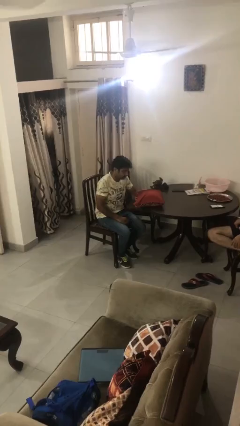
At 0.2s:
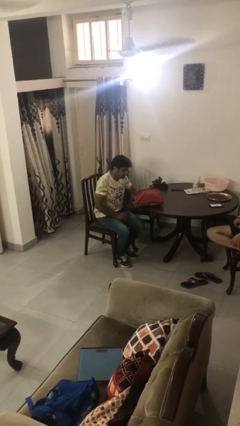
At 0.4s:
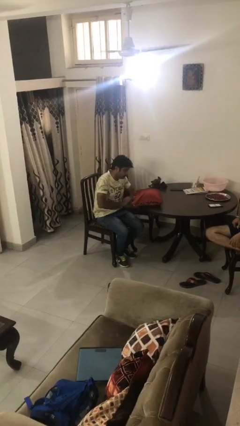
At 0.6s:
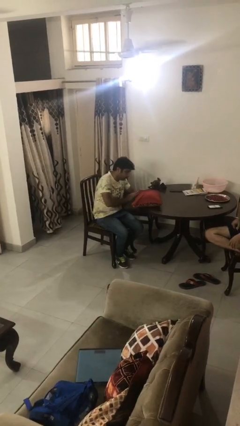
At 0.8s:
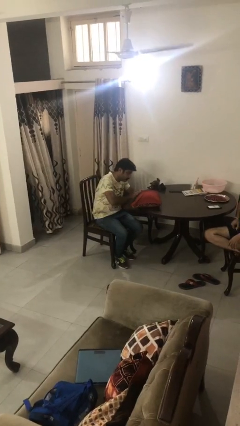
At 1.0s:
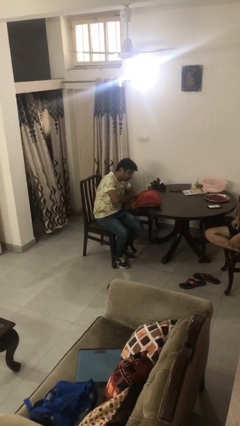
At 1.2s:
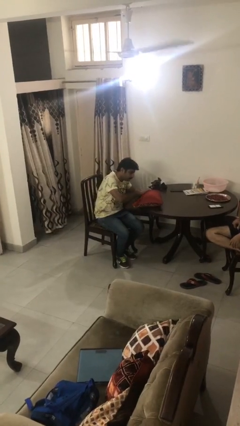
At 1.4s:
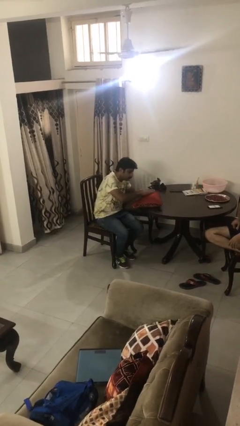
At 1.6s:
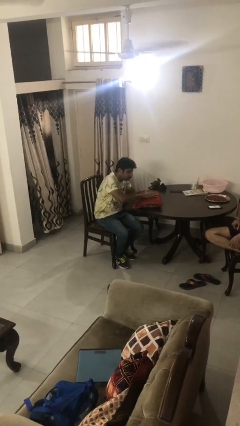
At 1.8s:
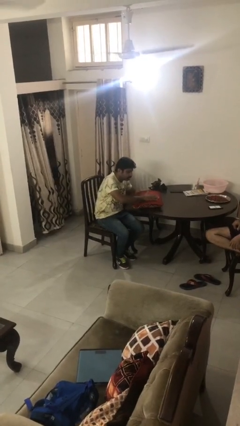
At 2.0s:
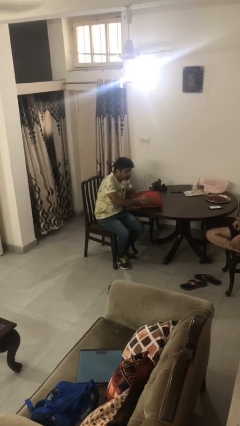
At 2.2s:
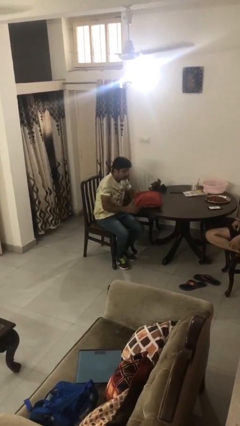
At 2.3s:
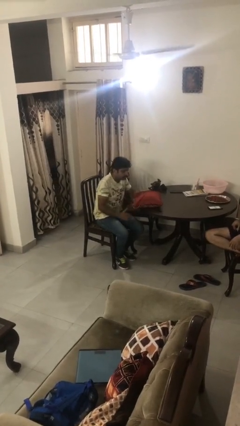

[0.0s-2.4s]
person waves hand over object

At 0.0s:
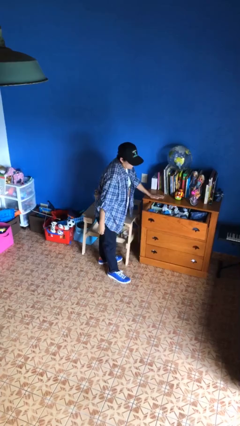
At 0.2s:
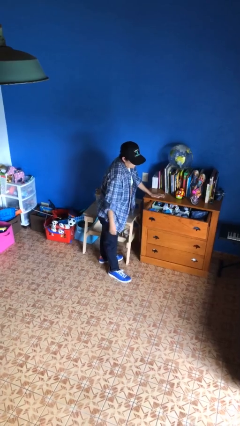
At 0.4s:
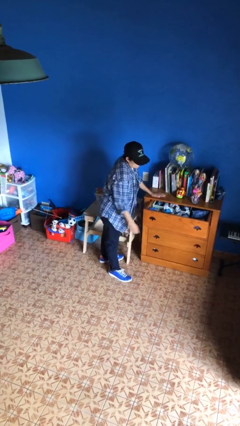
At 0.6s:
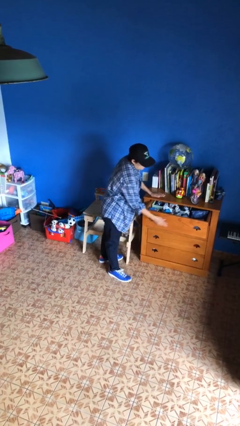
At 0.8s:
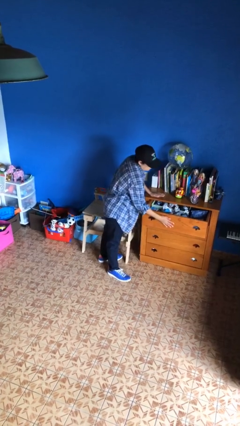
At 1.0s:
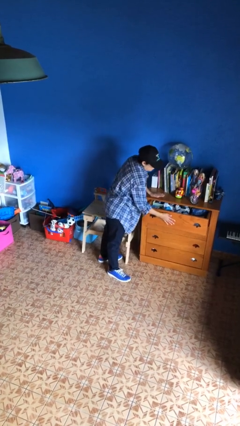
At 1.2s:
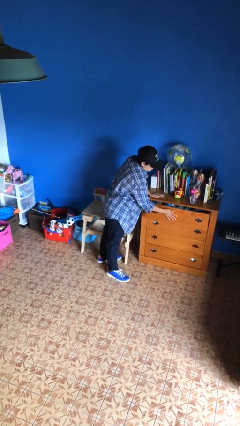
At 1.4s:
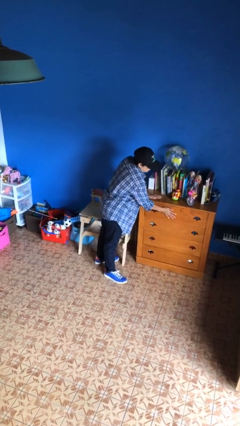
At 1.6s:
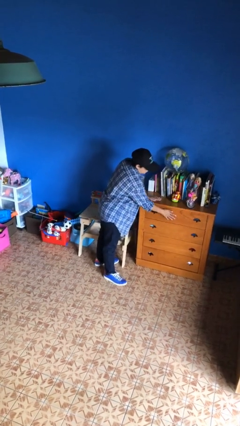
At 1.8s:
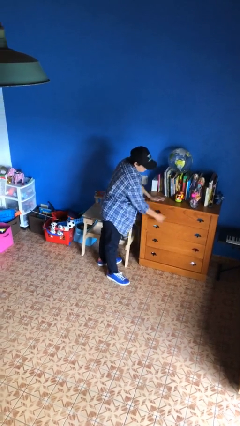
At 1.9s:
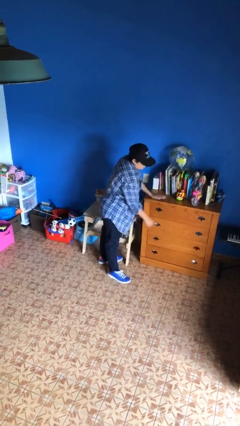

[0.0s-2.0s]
person closes dresser drawer

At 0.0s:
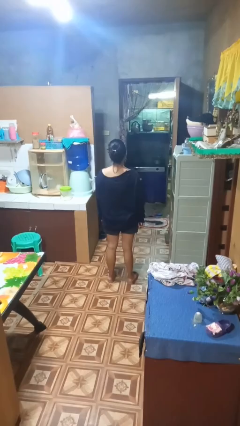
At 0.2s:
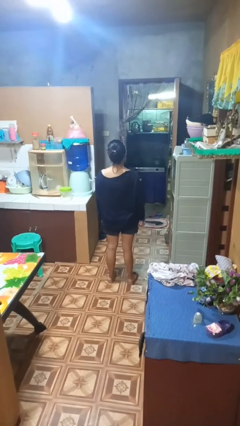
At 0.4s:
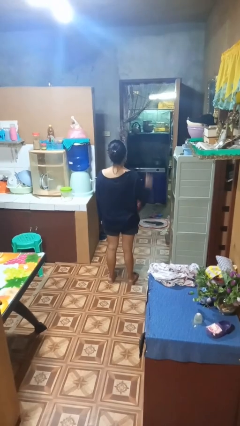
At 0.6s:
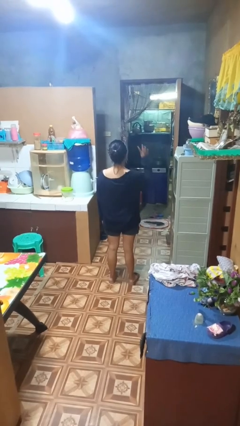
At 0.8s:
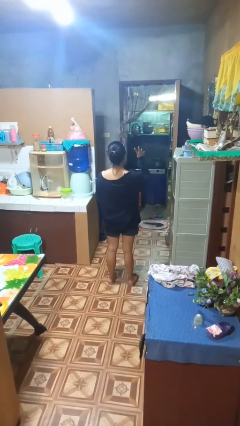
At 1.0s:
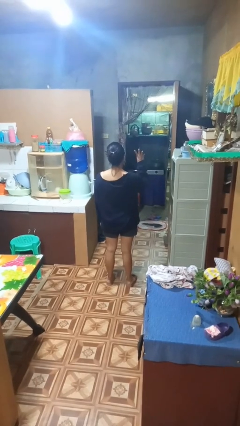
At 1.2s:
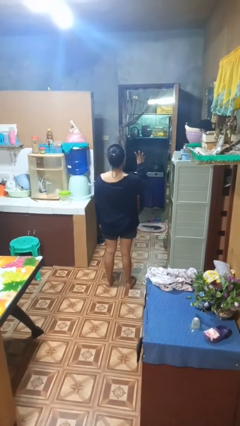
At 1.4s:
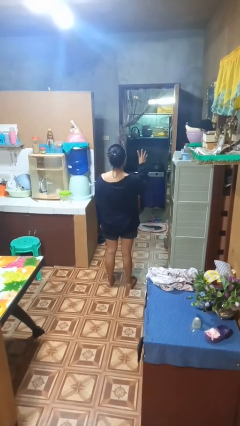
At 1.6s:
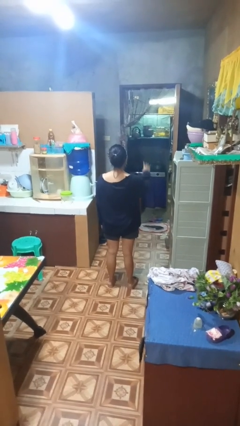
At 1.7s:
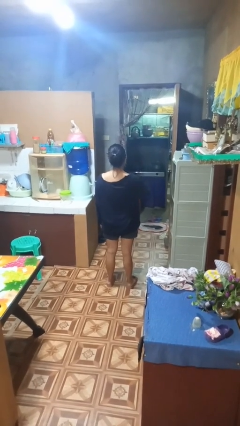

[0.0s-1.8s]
person gestures number four

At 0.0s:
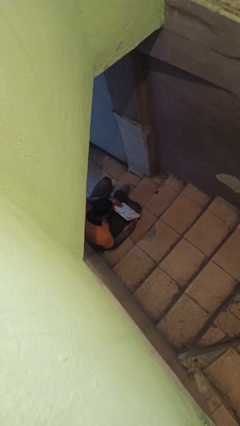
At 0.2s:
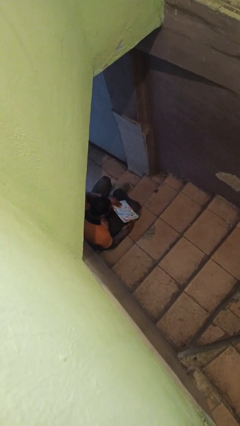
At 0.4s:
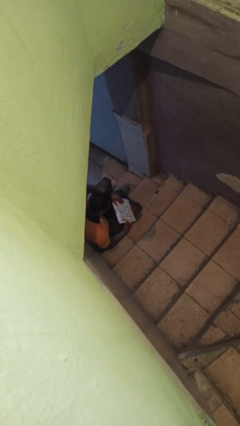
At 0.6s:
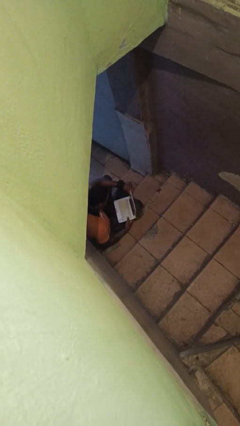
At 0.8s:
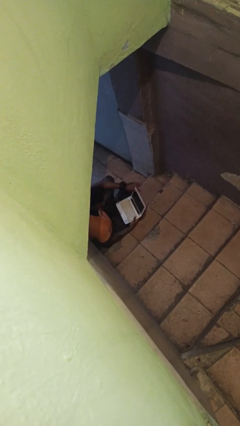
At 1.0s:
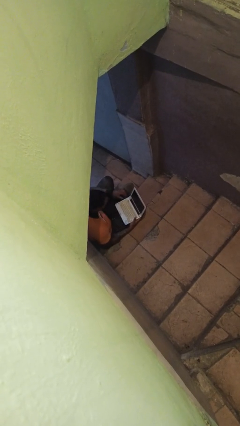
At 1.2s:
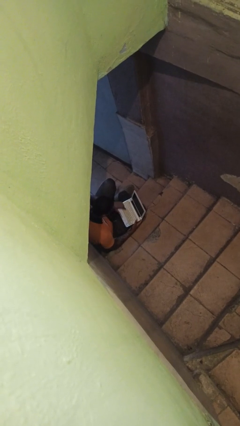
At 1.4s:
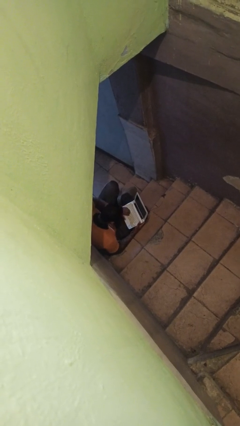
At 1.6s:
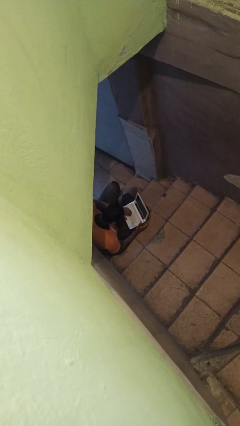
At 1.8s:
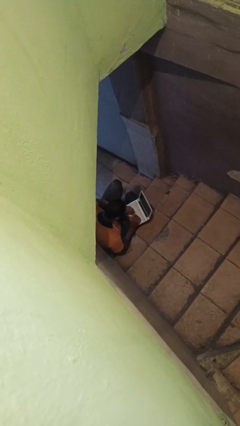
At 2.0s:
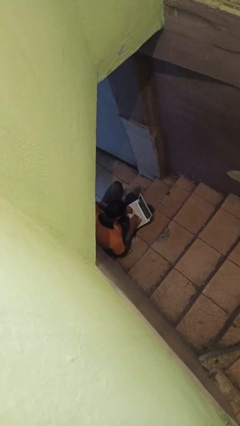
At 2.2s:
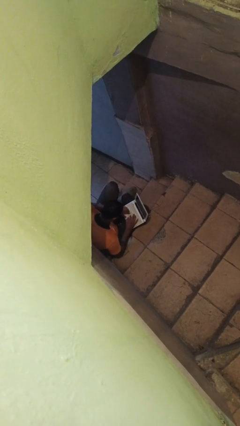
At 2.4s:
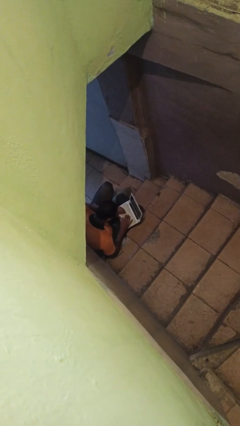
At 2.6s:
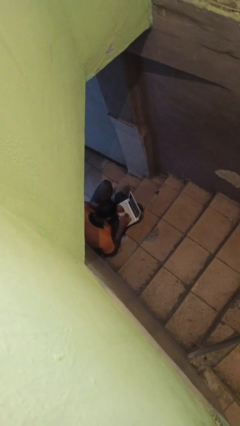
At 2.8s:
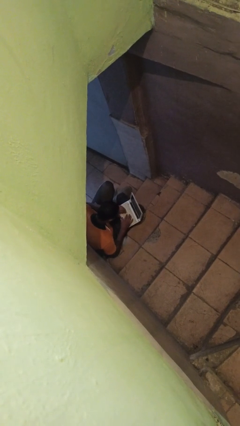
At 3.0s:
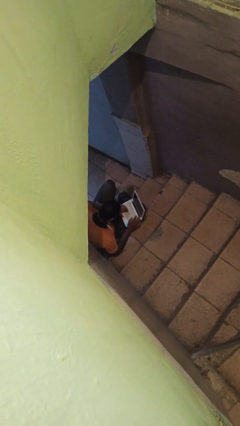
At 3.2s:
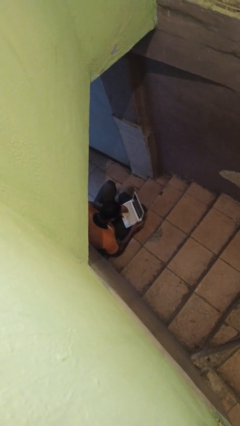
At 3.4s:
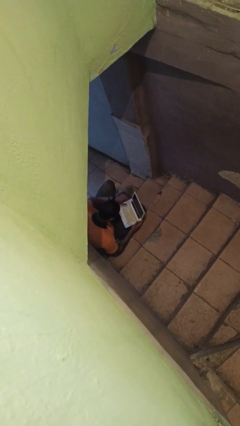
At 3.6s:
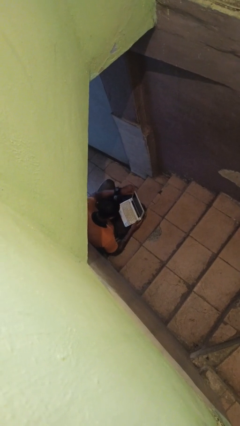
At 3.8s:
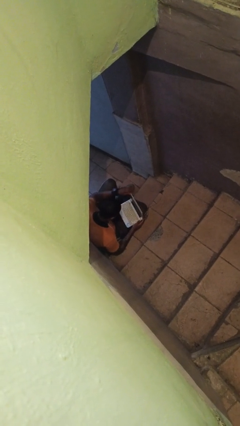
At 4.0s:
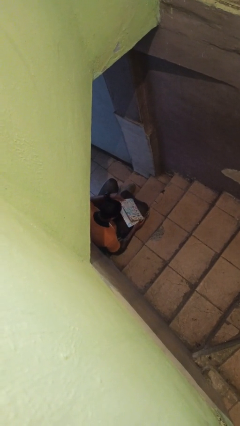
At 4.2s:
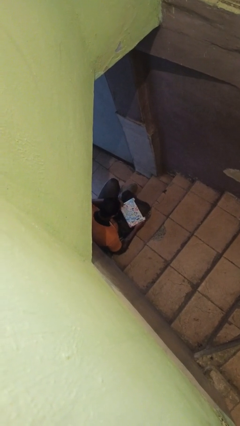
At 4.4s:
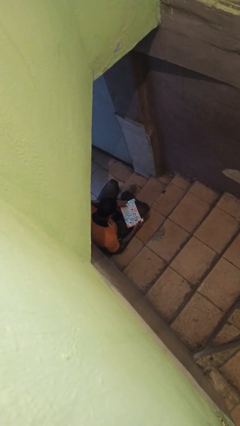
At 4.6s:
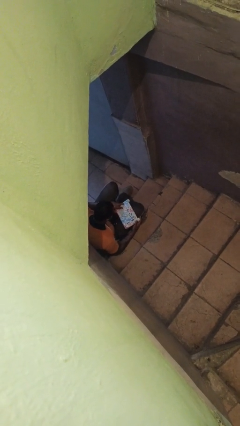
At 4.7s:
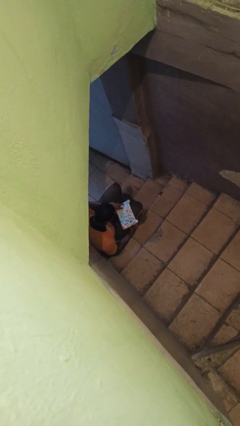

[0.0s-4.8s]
person interacts with laptop

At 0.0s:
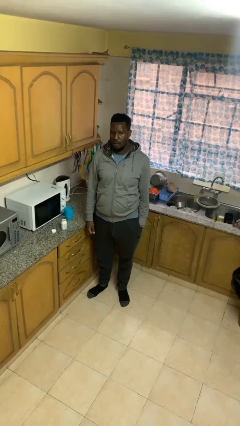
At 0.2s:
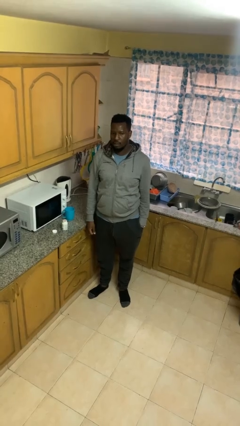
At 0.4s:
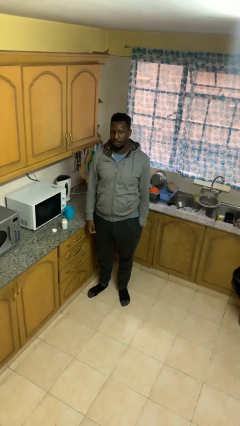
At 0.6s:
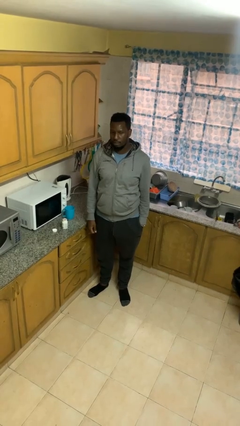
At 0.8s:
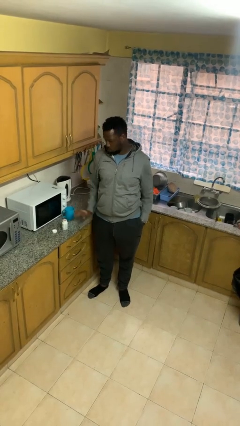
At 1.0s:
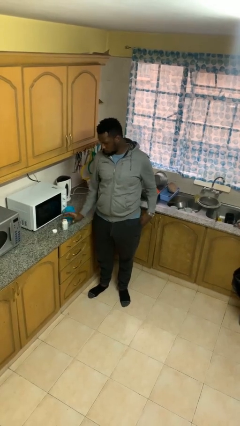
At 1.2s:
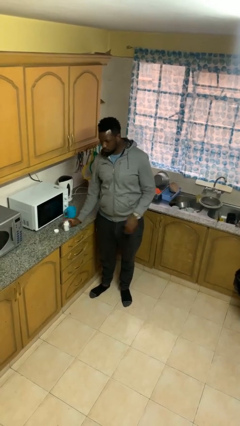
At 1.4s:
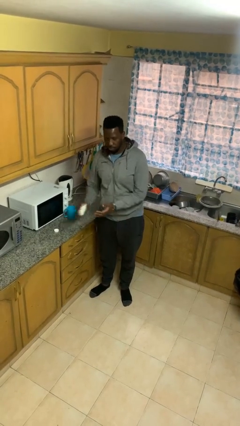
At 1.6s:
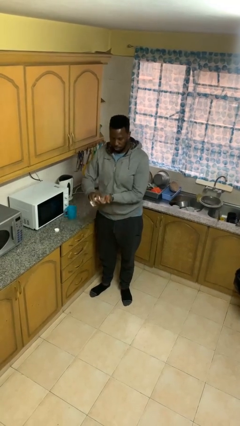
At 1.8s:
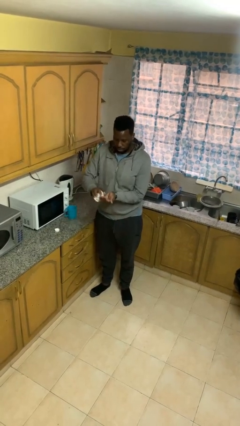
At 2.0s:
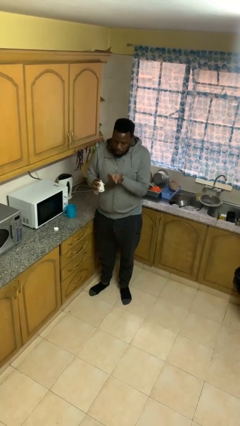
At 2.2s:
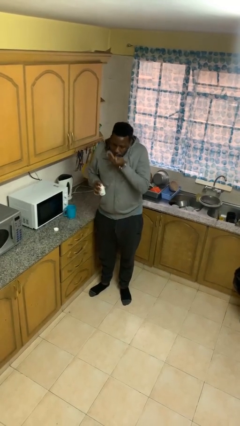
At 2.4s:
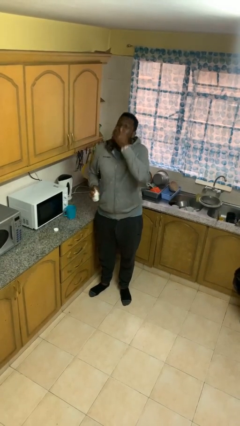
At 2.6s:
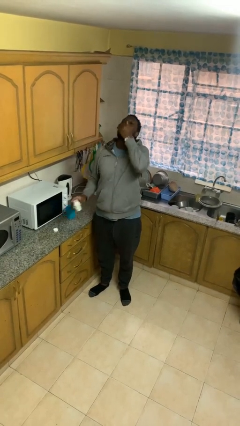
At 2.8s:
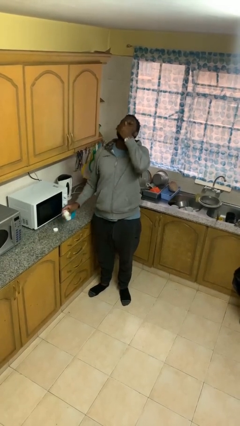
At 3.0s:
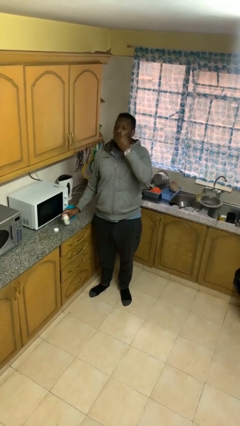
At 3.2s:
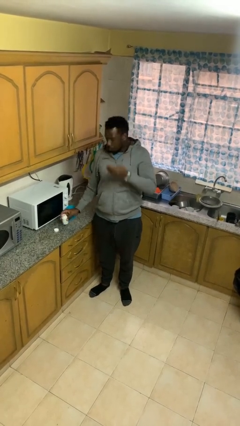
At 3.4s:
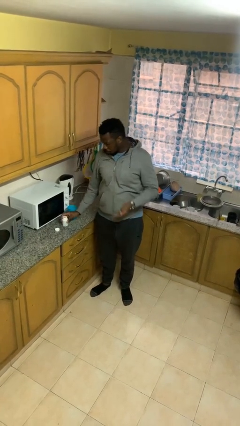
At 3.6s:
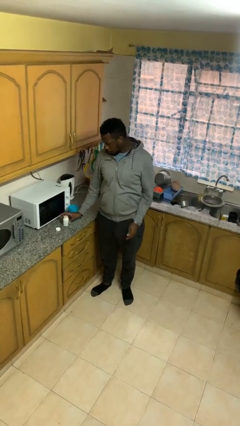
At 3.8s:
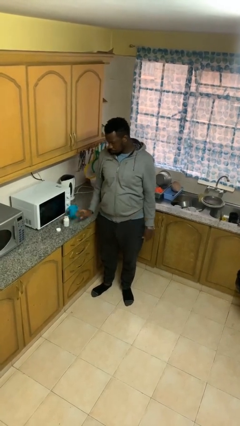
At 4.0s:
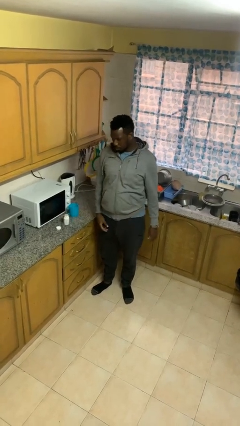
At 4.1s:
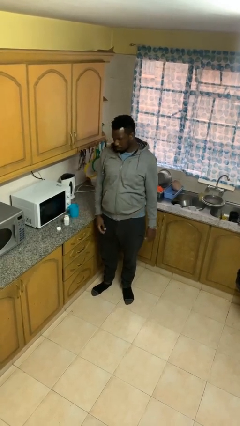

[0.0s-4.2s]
person takes medicine pills

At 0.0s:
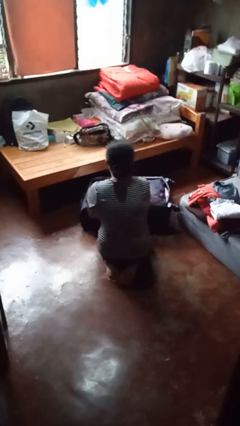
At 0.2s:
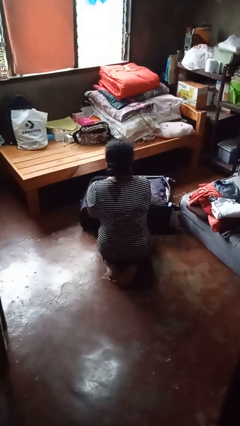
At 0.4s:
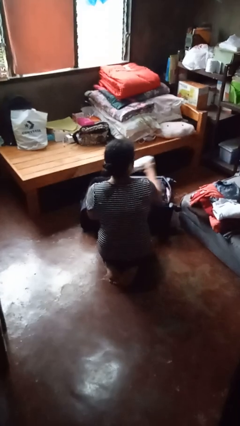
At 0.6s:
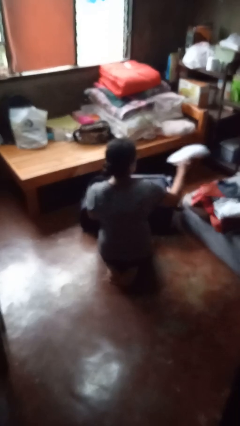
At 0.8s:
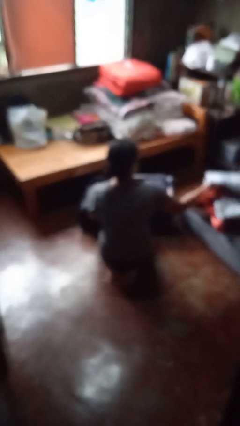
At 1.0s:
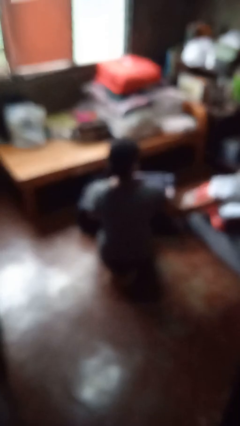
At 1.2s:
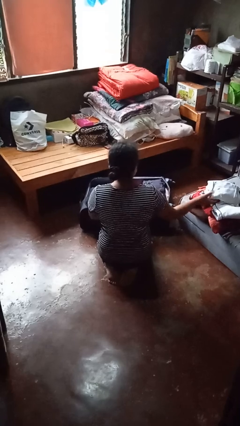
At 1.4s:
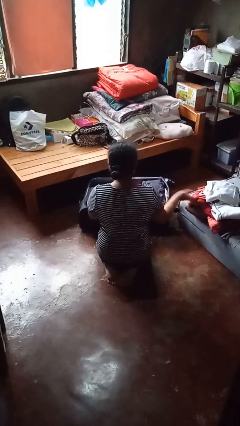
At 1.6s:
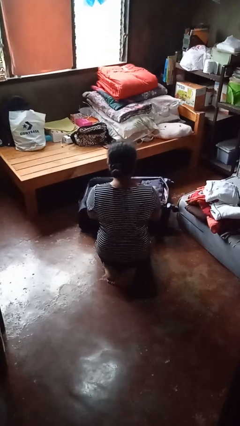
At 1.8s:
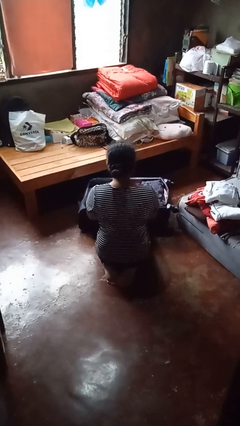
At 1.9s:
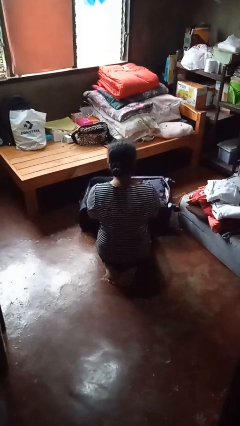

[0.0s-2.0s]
person unloads clothes from suitcase

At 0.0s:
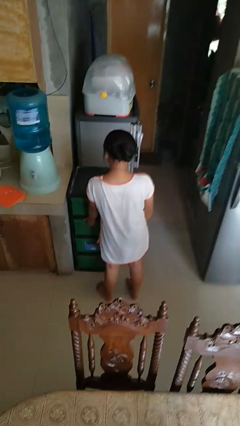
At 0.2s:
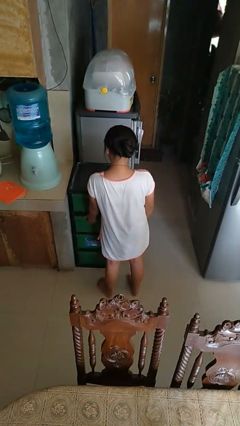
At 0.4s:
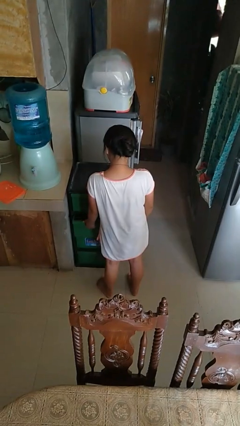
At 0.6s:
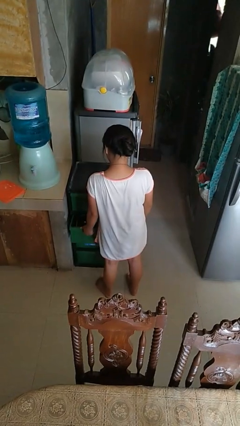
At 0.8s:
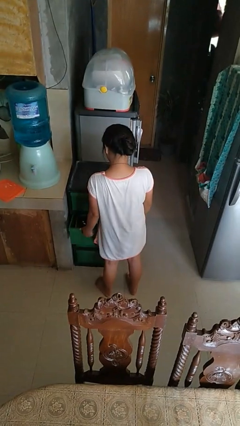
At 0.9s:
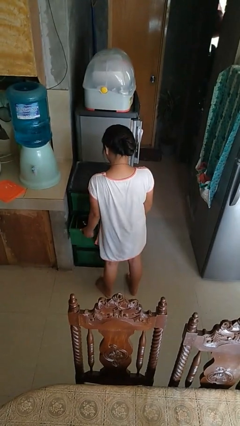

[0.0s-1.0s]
person opens kitchen drawer
